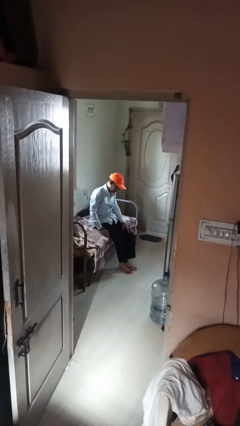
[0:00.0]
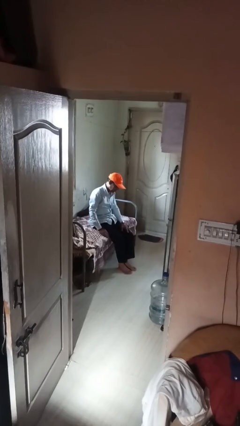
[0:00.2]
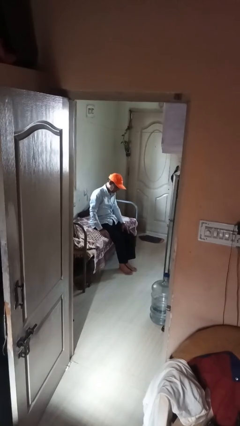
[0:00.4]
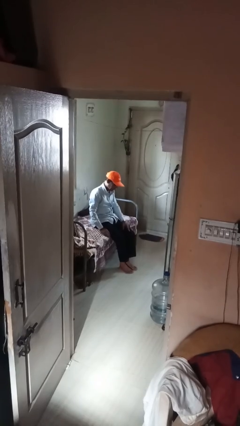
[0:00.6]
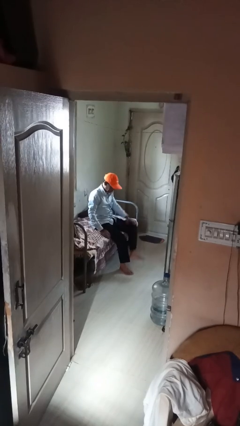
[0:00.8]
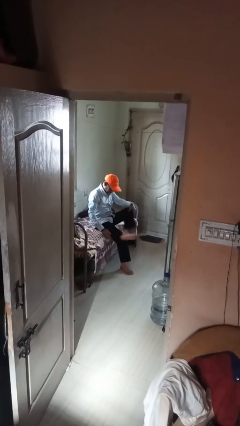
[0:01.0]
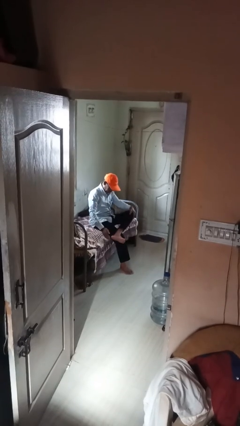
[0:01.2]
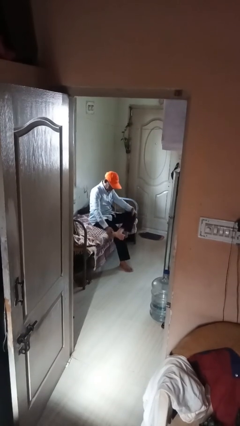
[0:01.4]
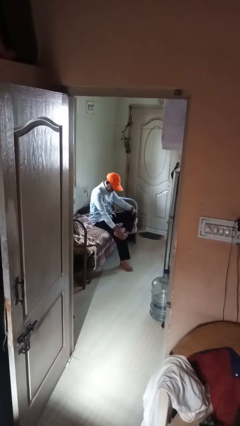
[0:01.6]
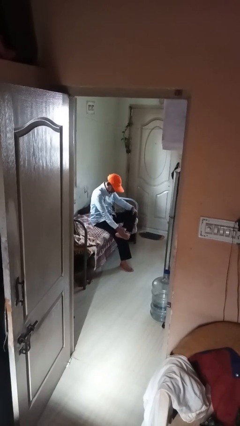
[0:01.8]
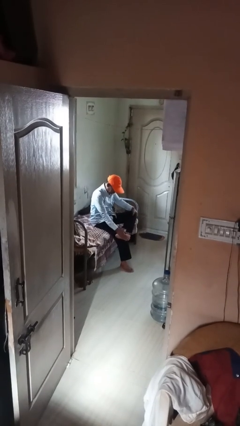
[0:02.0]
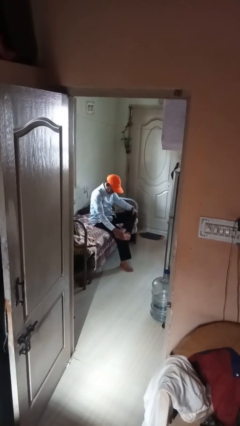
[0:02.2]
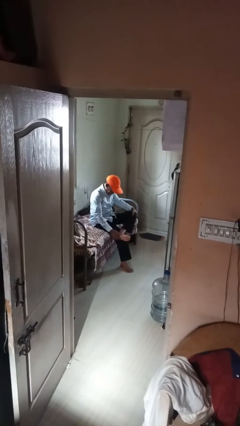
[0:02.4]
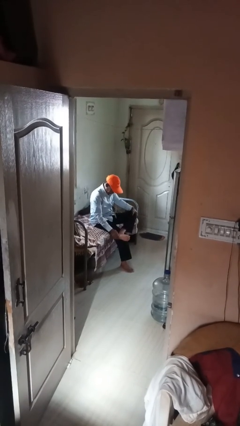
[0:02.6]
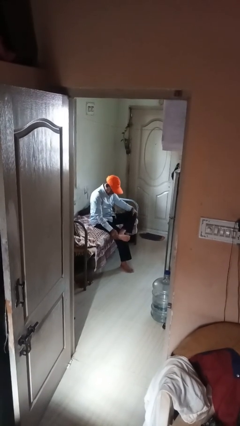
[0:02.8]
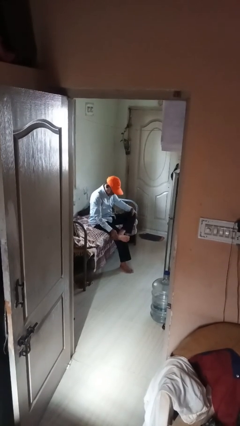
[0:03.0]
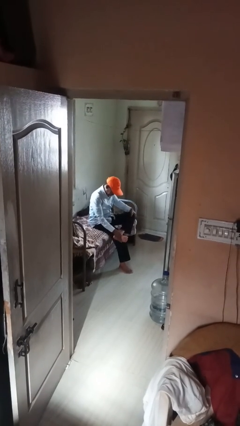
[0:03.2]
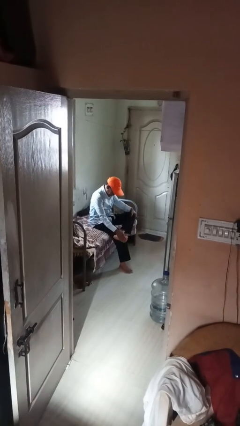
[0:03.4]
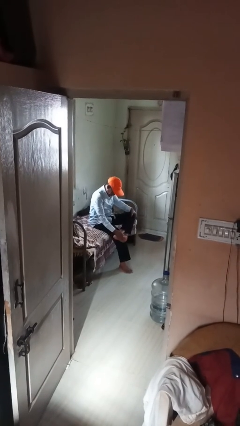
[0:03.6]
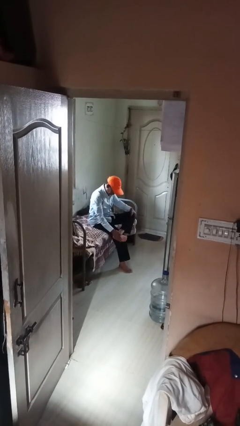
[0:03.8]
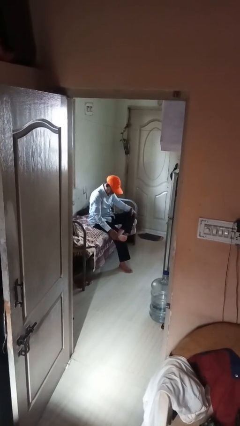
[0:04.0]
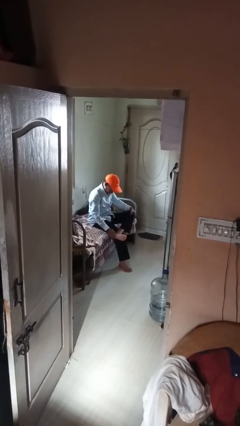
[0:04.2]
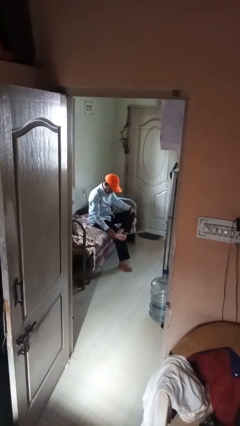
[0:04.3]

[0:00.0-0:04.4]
person rubs foot

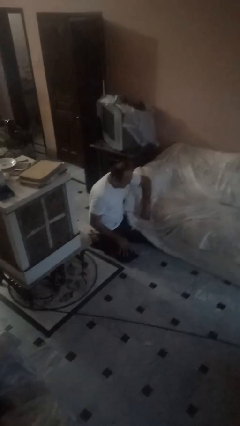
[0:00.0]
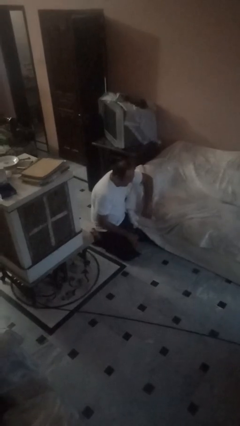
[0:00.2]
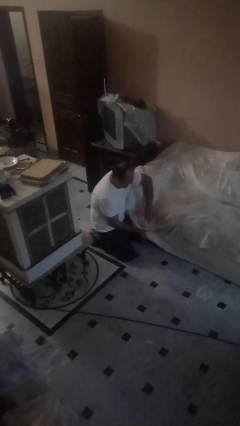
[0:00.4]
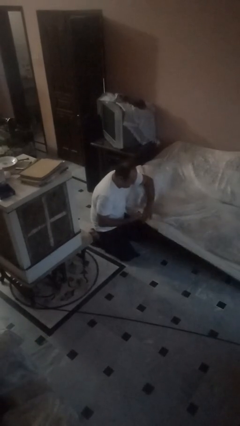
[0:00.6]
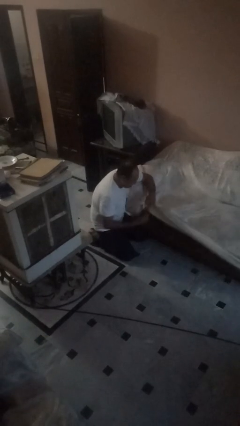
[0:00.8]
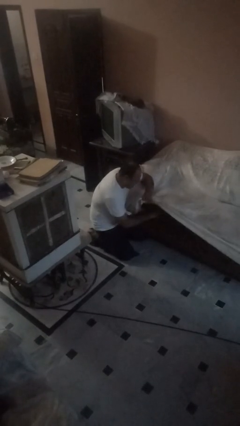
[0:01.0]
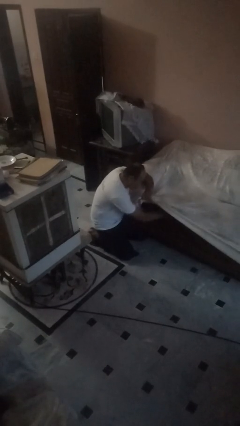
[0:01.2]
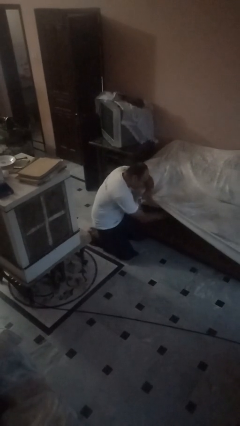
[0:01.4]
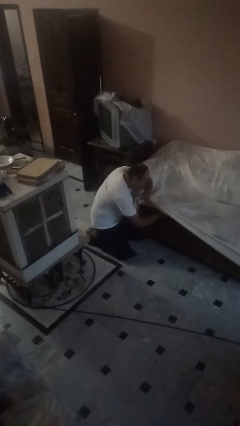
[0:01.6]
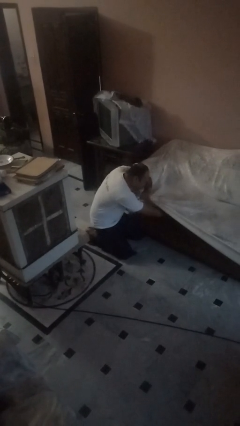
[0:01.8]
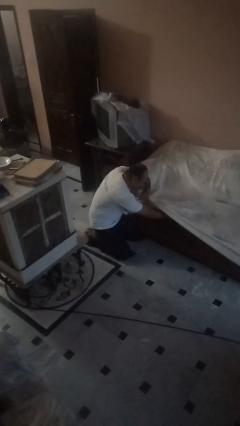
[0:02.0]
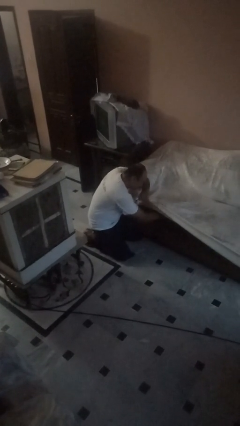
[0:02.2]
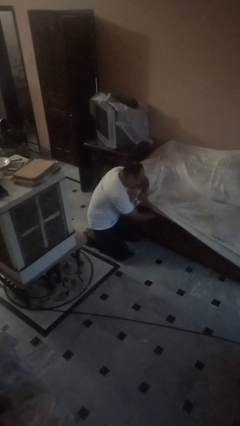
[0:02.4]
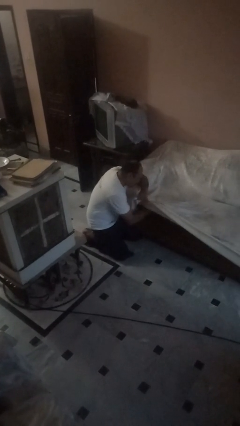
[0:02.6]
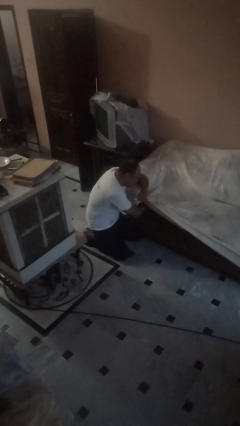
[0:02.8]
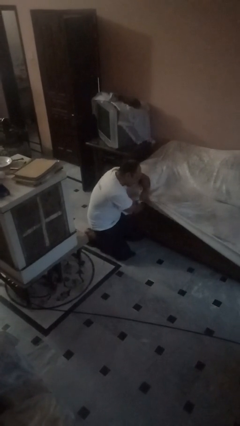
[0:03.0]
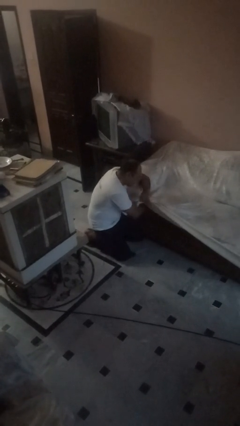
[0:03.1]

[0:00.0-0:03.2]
person searches in couch

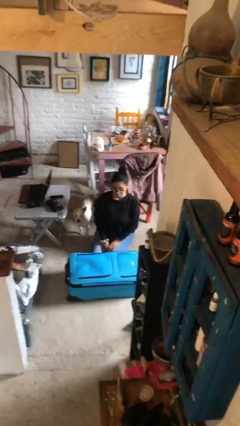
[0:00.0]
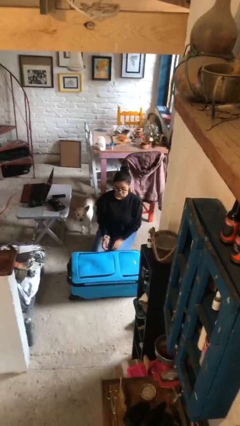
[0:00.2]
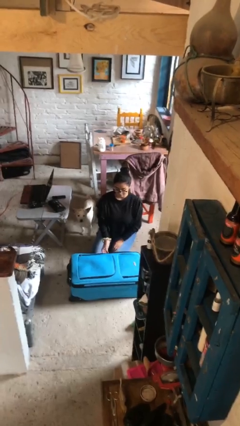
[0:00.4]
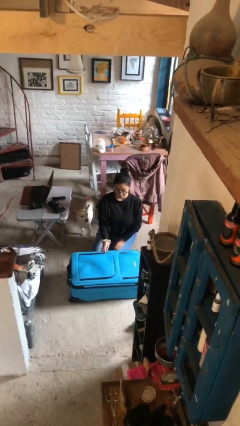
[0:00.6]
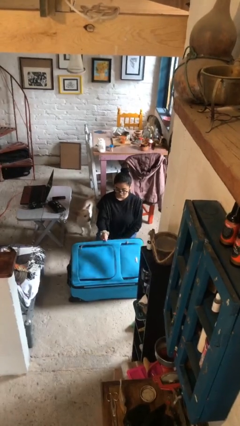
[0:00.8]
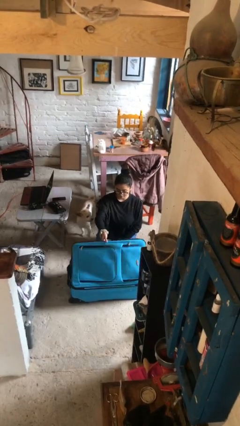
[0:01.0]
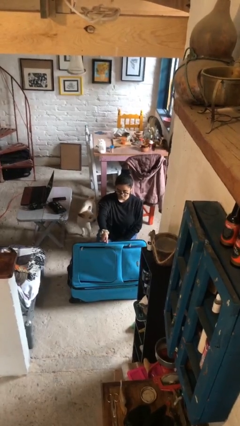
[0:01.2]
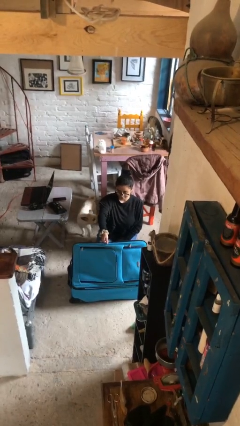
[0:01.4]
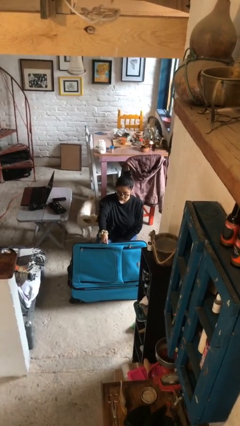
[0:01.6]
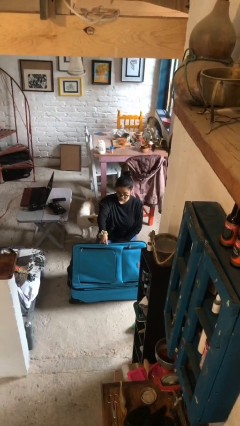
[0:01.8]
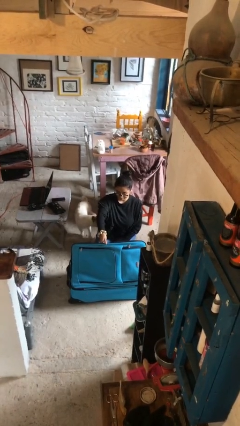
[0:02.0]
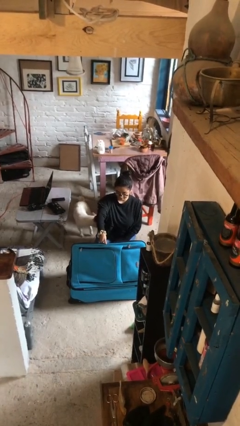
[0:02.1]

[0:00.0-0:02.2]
person opens suitcase

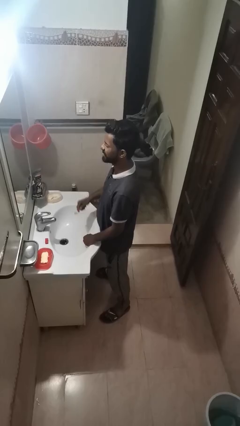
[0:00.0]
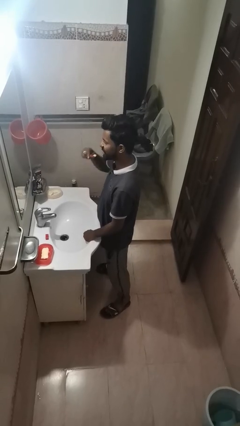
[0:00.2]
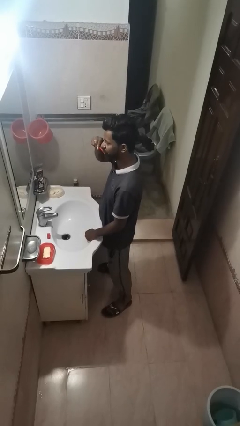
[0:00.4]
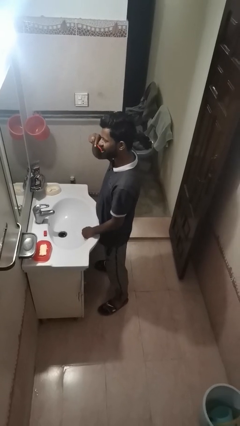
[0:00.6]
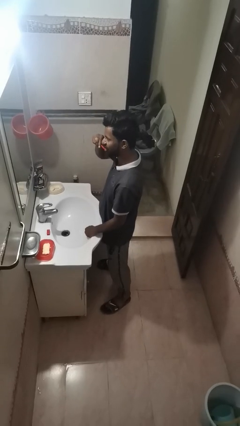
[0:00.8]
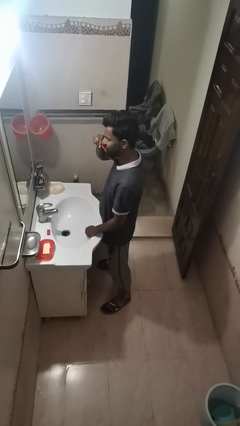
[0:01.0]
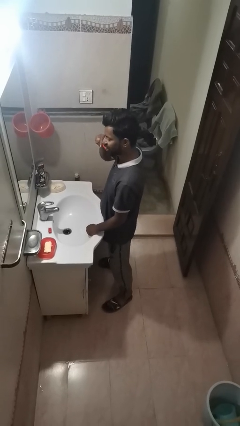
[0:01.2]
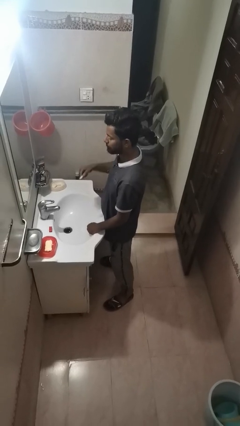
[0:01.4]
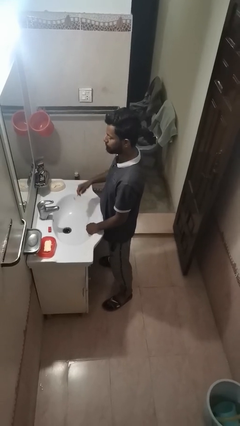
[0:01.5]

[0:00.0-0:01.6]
person brushes teeth

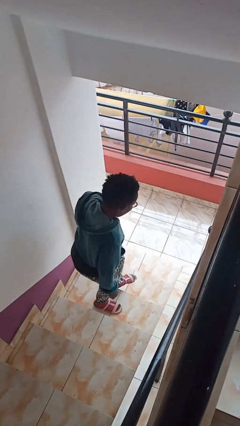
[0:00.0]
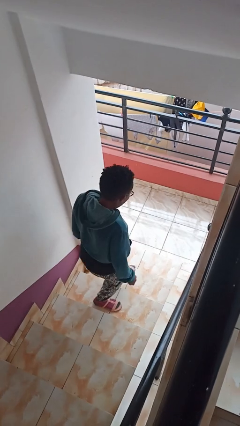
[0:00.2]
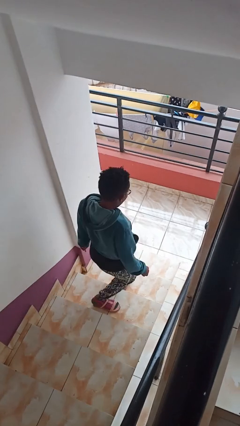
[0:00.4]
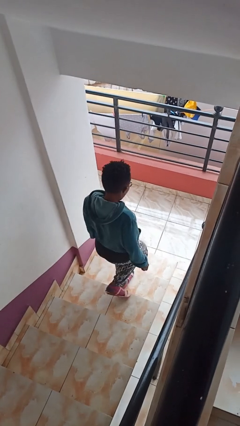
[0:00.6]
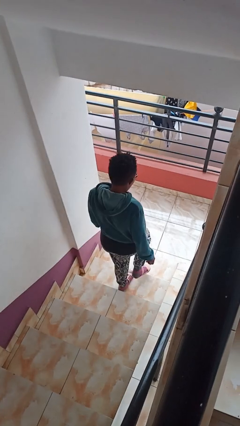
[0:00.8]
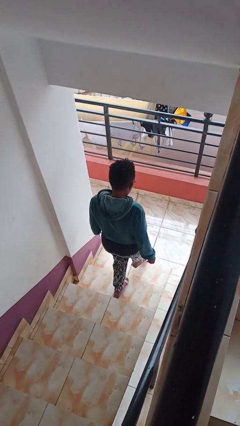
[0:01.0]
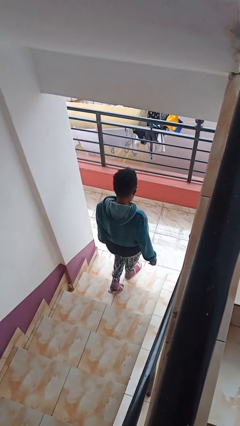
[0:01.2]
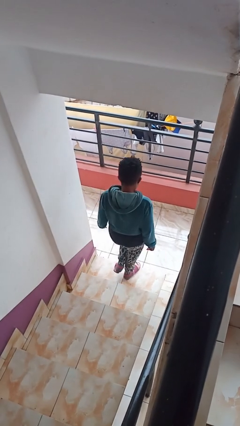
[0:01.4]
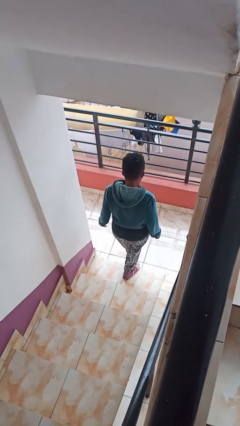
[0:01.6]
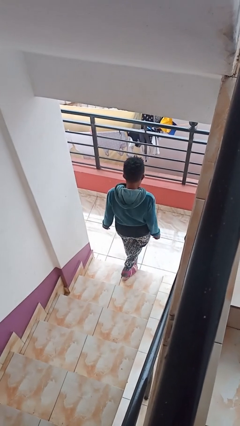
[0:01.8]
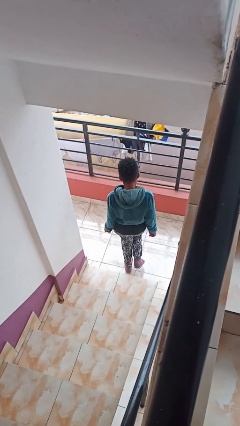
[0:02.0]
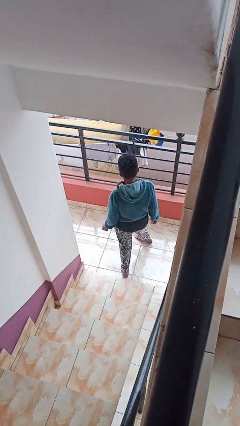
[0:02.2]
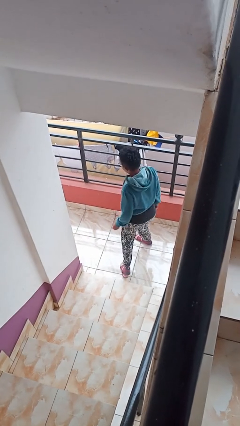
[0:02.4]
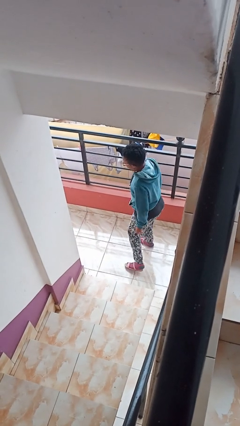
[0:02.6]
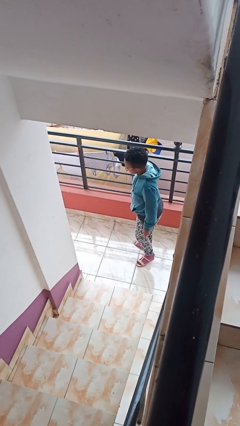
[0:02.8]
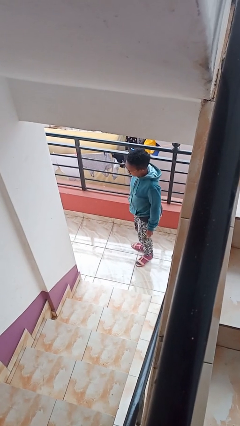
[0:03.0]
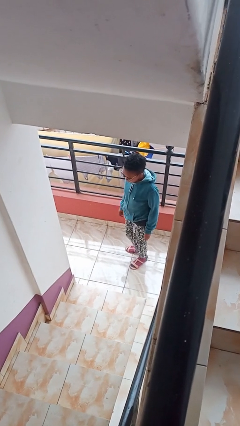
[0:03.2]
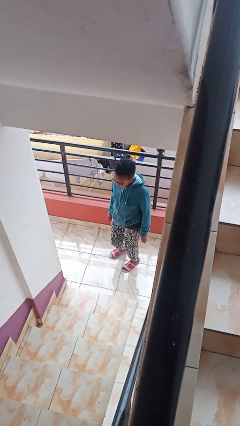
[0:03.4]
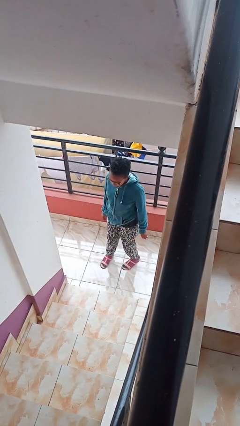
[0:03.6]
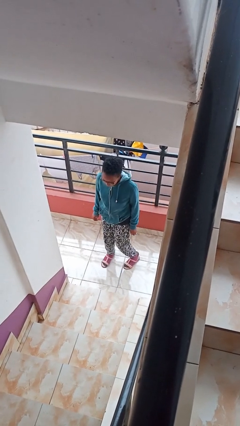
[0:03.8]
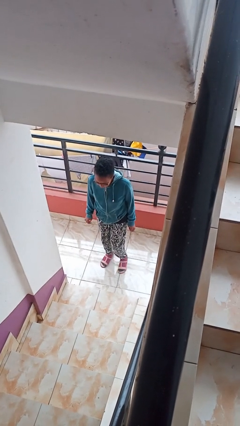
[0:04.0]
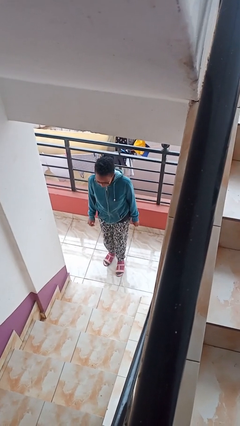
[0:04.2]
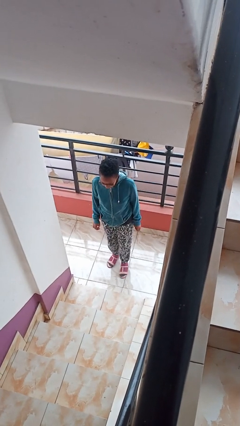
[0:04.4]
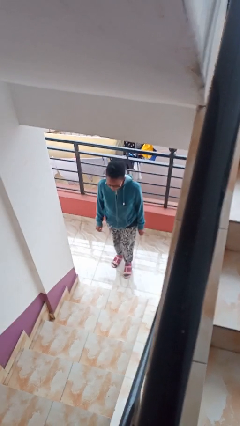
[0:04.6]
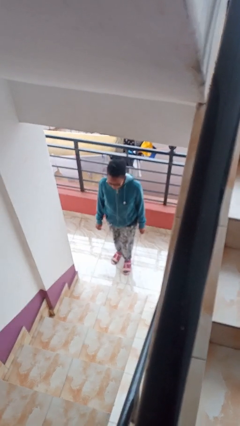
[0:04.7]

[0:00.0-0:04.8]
person climbs down stairs

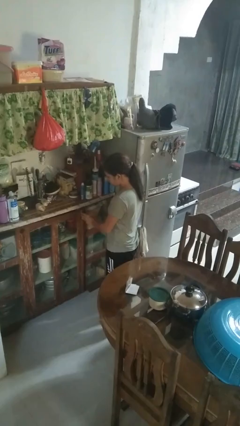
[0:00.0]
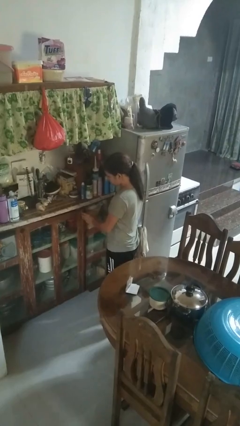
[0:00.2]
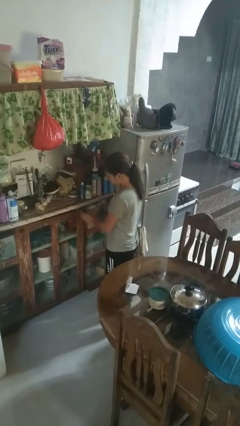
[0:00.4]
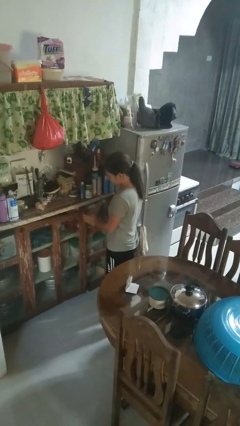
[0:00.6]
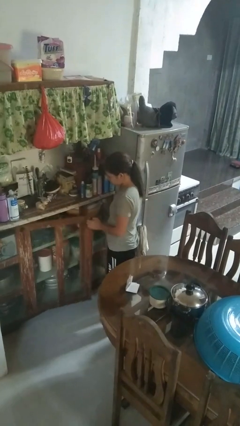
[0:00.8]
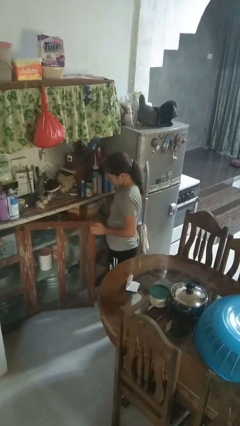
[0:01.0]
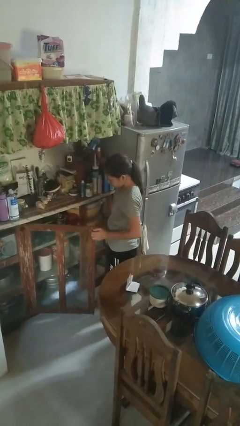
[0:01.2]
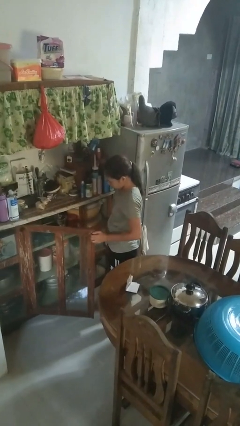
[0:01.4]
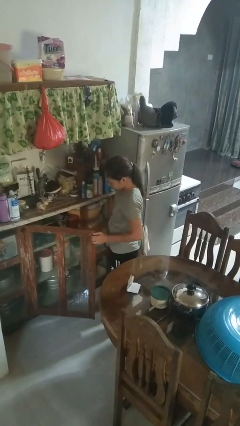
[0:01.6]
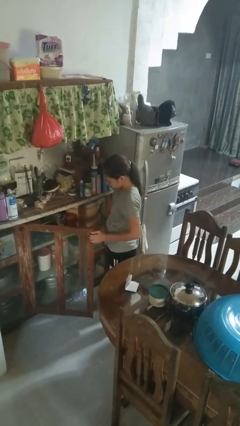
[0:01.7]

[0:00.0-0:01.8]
person opens cabinet
